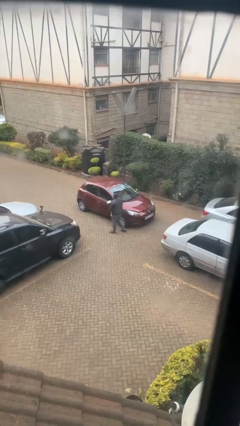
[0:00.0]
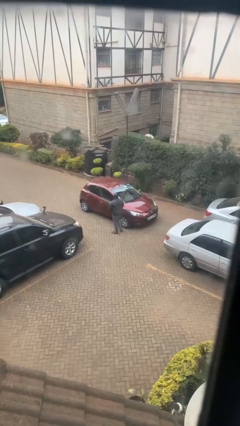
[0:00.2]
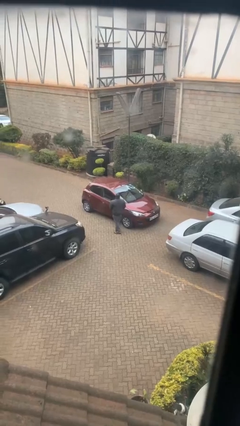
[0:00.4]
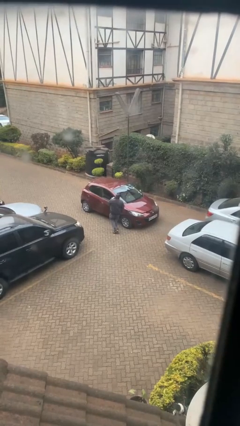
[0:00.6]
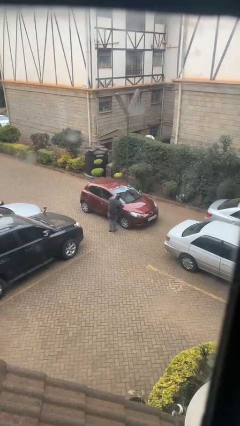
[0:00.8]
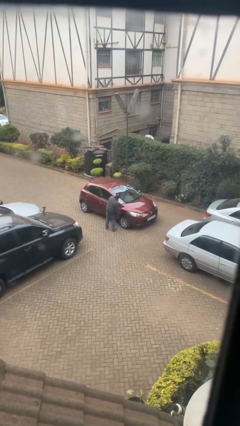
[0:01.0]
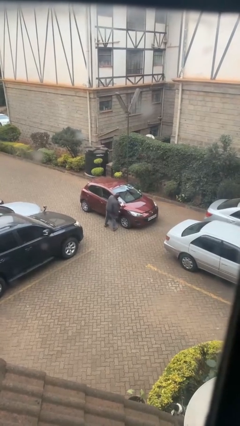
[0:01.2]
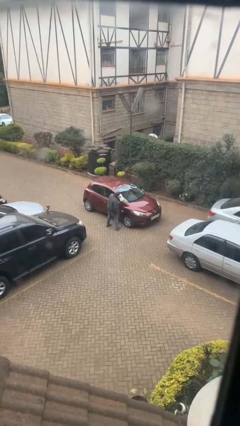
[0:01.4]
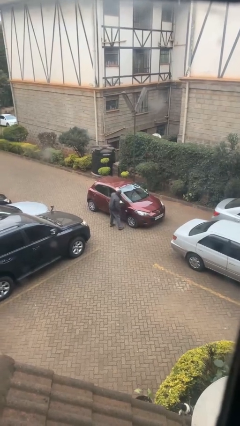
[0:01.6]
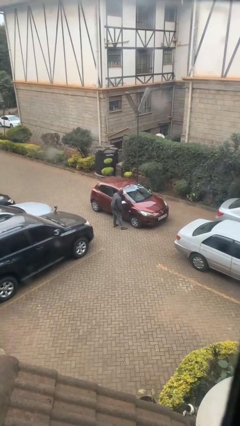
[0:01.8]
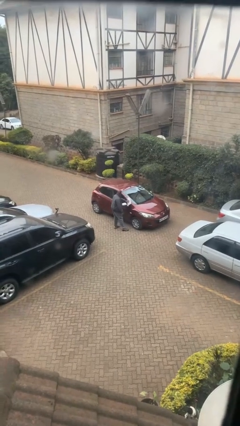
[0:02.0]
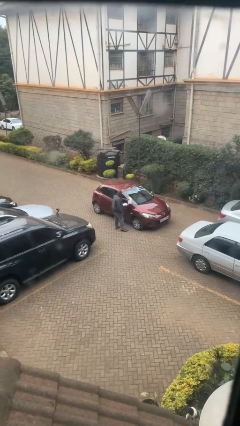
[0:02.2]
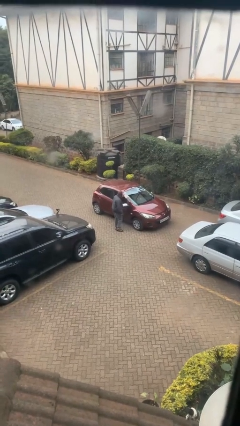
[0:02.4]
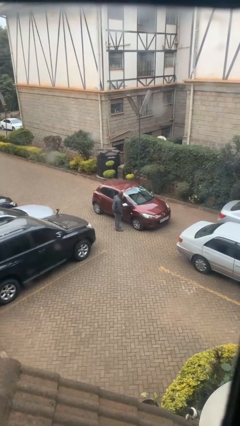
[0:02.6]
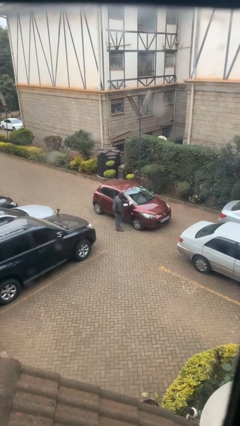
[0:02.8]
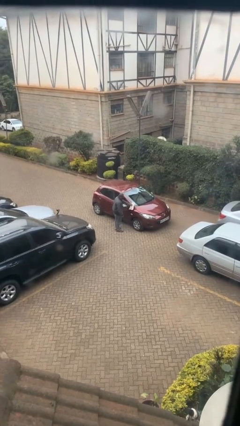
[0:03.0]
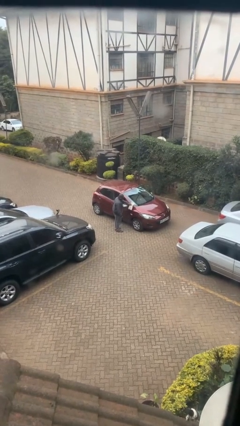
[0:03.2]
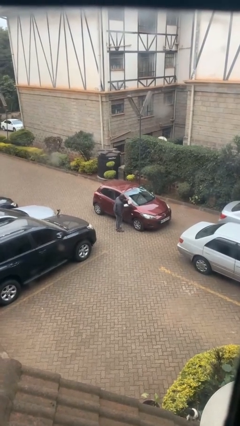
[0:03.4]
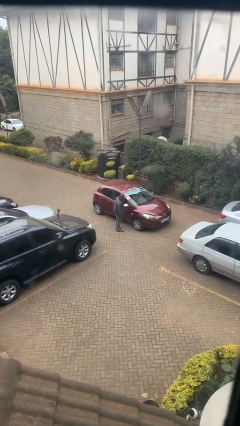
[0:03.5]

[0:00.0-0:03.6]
person polishes car with rag

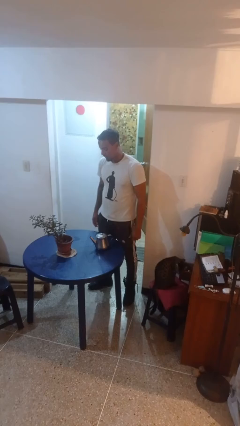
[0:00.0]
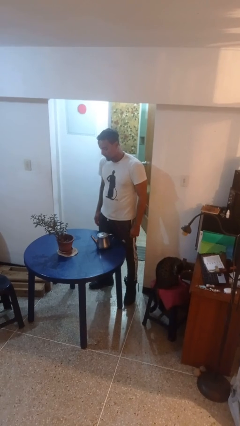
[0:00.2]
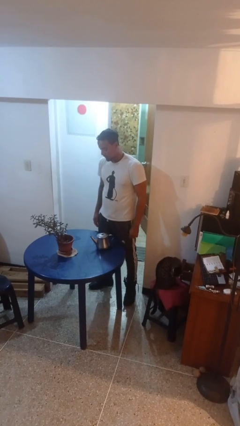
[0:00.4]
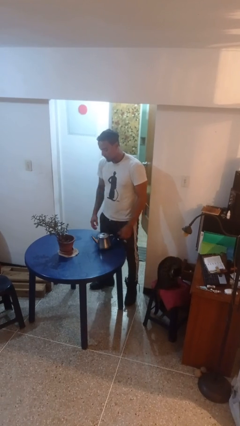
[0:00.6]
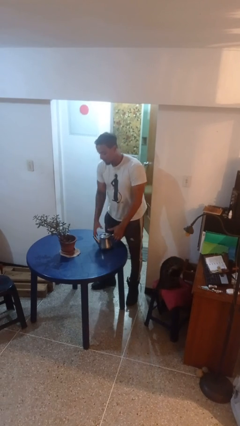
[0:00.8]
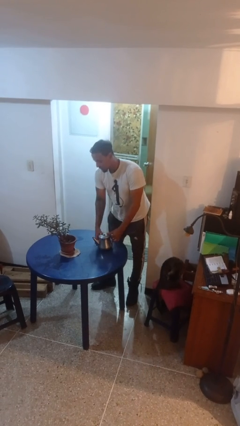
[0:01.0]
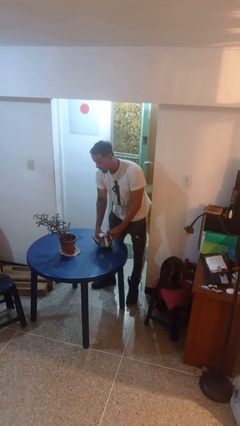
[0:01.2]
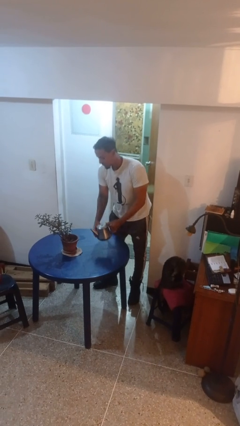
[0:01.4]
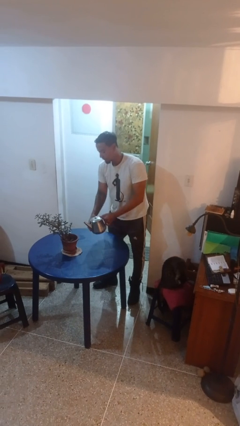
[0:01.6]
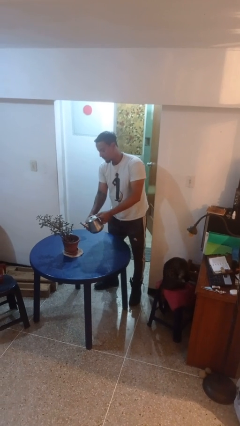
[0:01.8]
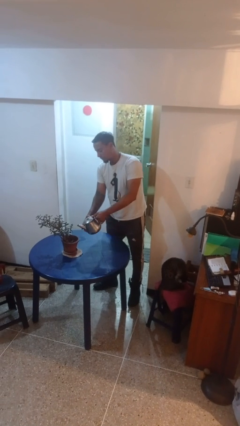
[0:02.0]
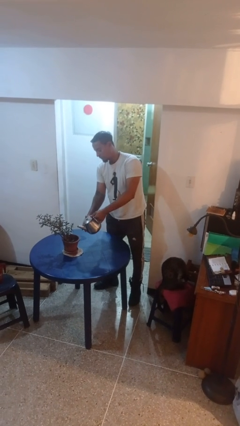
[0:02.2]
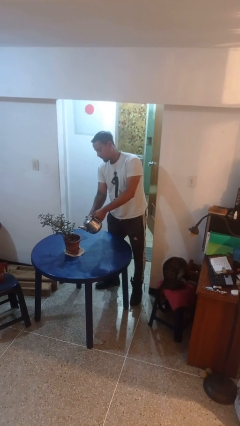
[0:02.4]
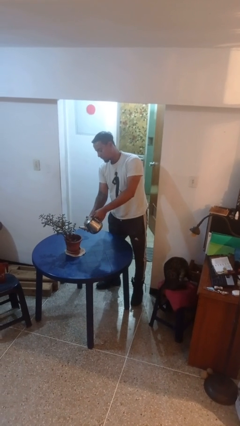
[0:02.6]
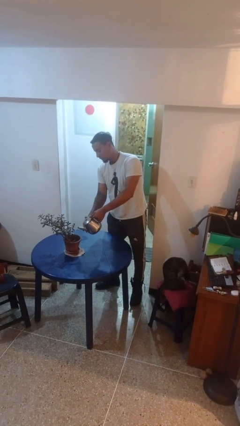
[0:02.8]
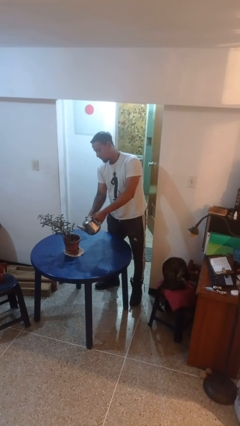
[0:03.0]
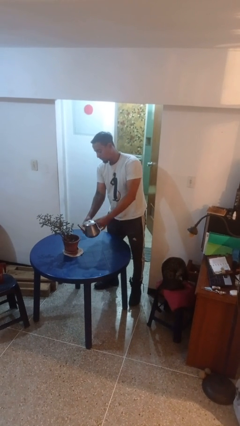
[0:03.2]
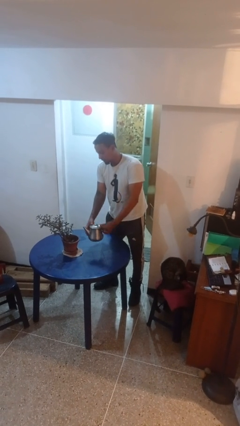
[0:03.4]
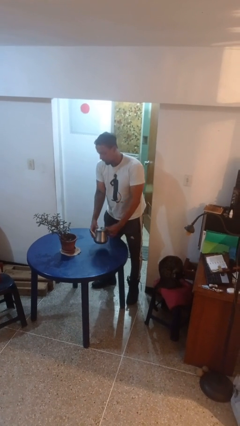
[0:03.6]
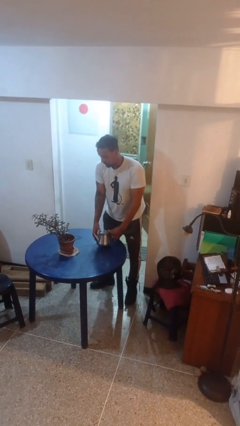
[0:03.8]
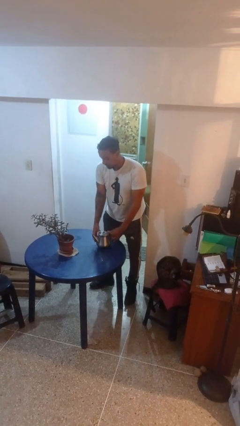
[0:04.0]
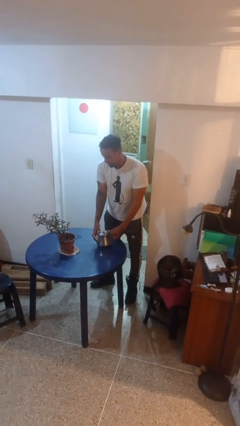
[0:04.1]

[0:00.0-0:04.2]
person waters houseplant

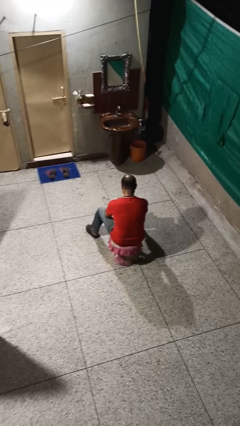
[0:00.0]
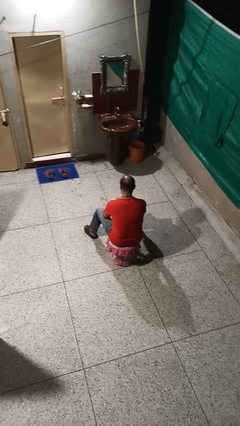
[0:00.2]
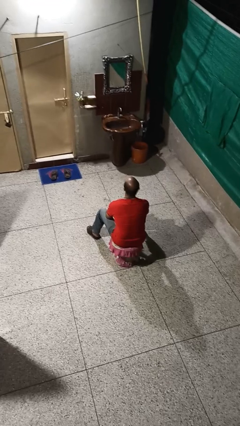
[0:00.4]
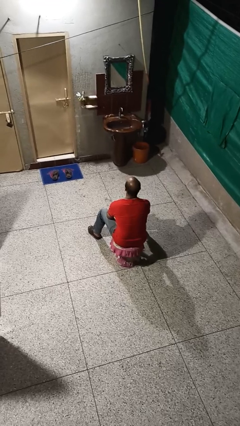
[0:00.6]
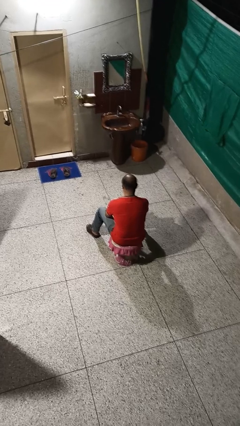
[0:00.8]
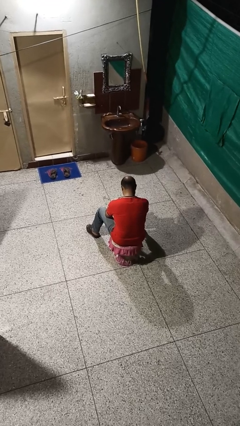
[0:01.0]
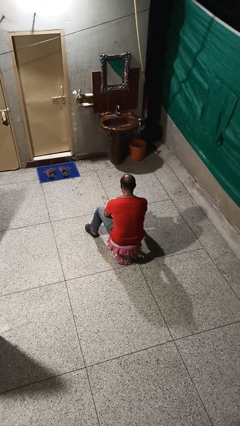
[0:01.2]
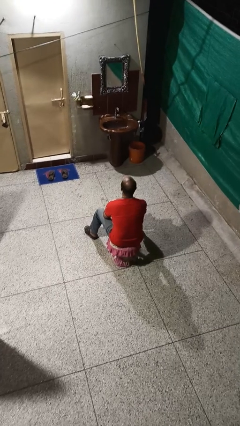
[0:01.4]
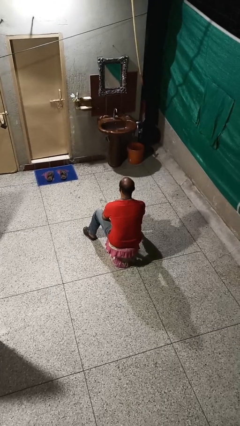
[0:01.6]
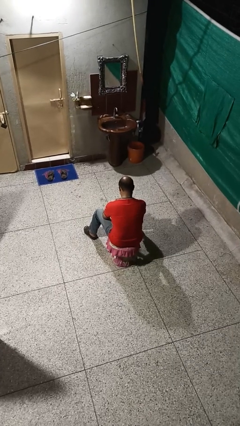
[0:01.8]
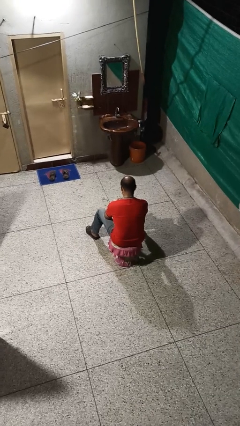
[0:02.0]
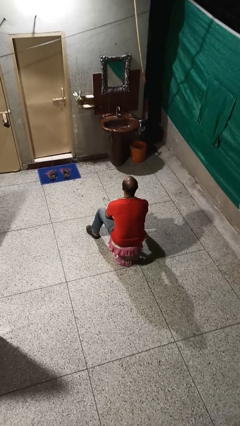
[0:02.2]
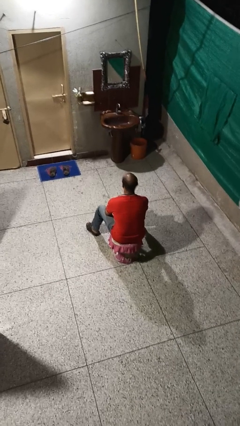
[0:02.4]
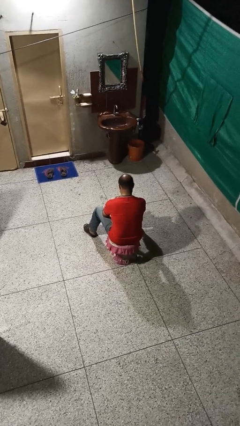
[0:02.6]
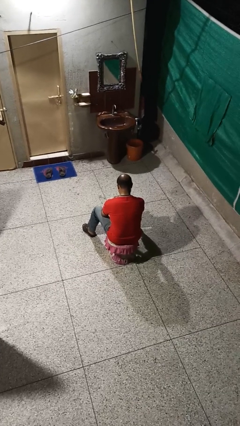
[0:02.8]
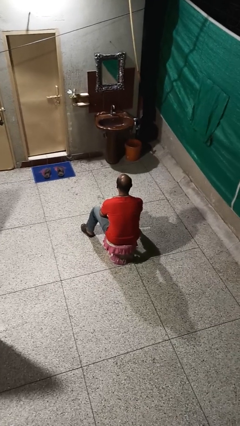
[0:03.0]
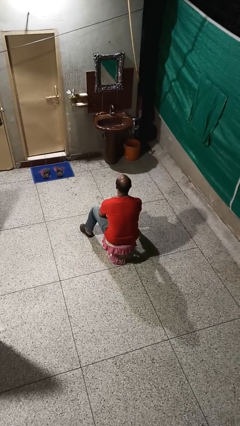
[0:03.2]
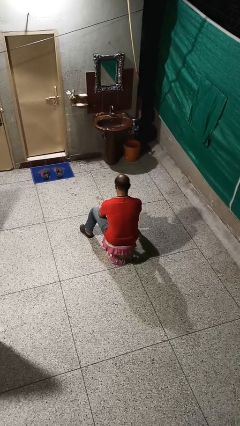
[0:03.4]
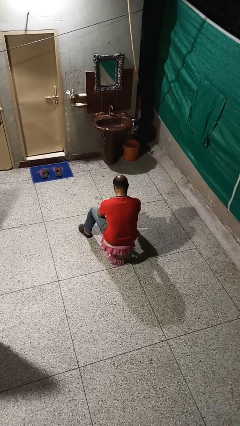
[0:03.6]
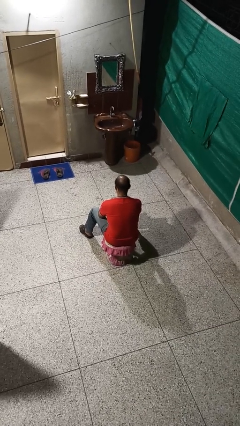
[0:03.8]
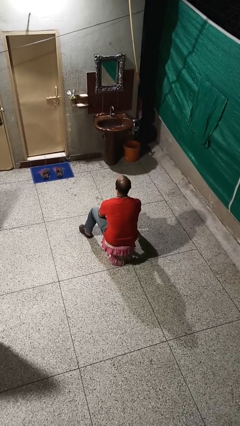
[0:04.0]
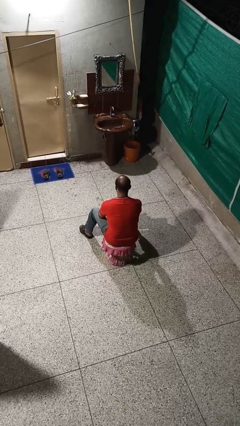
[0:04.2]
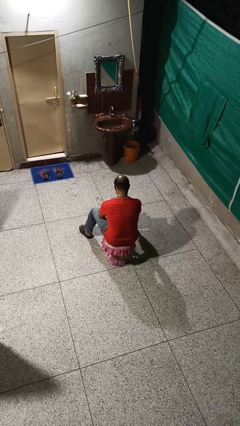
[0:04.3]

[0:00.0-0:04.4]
person nods head

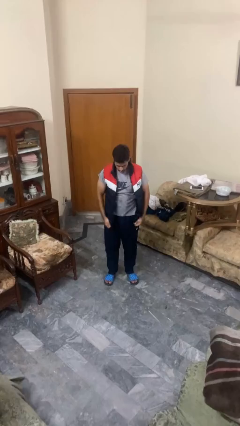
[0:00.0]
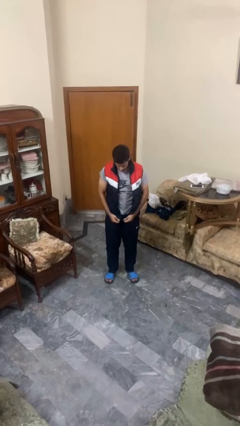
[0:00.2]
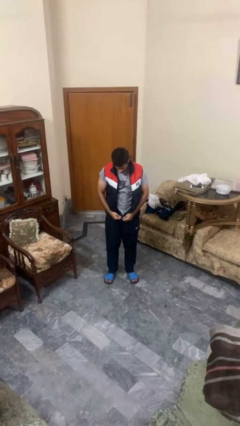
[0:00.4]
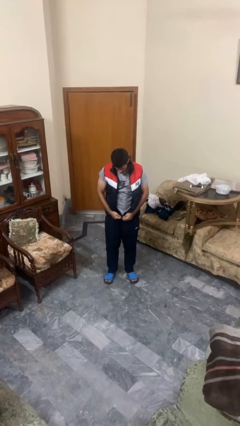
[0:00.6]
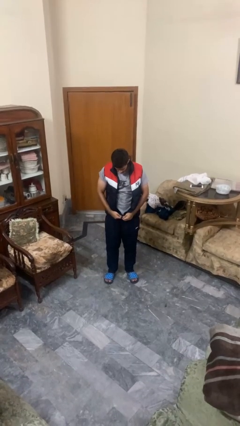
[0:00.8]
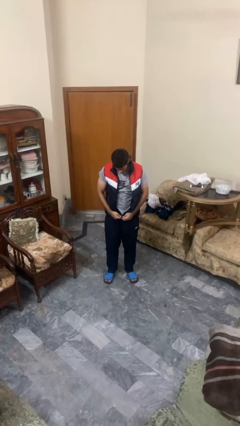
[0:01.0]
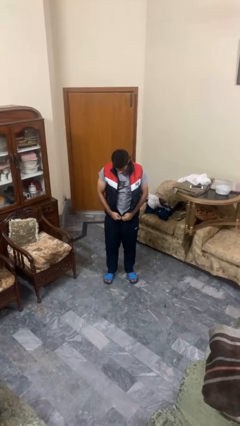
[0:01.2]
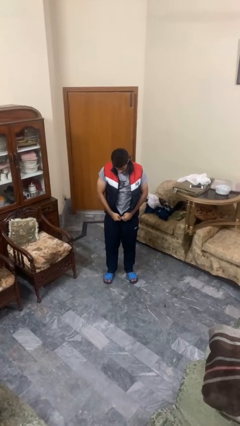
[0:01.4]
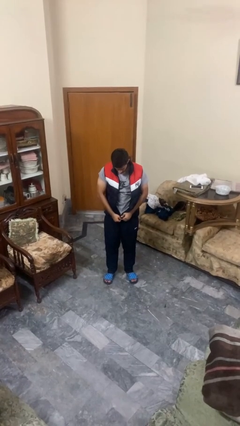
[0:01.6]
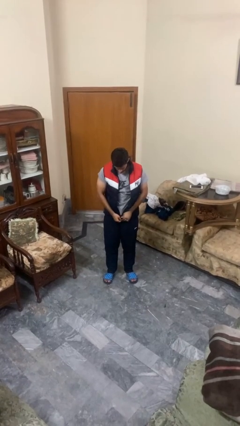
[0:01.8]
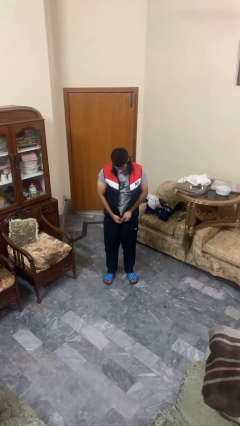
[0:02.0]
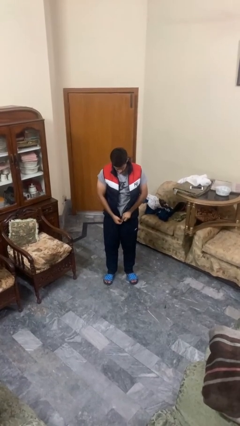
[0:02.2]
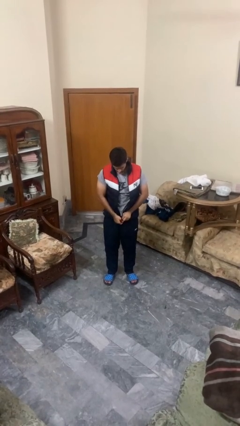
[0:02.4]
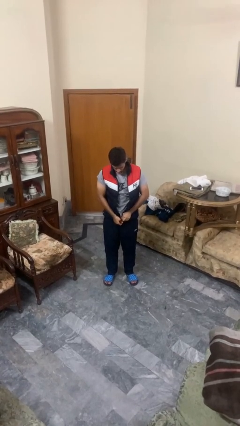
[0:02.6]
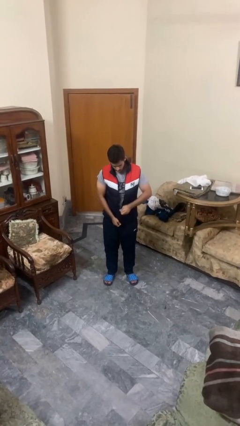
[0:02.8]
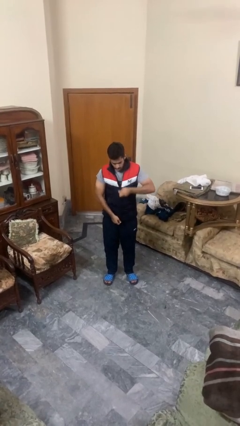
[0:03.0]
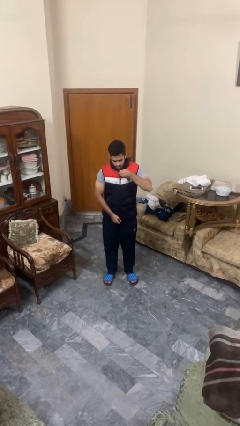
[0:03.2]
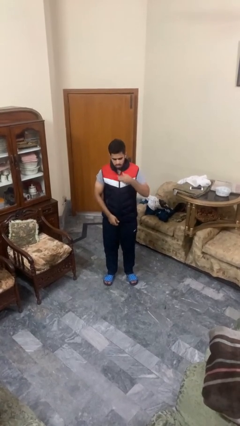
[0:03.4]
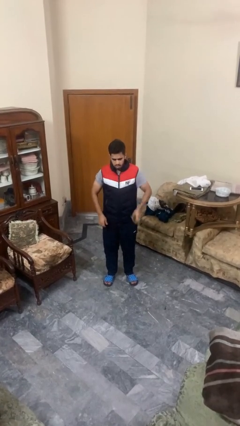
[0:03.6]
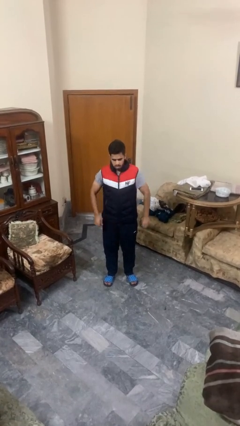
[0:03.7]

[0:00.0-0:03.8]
person zips up jacket

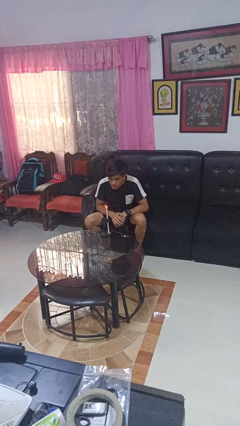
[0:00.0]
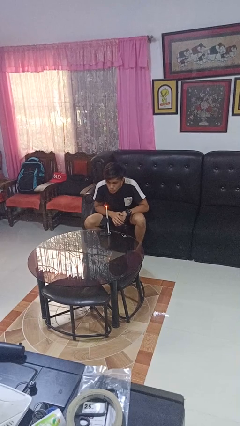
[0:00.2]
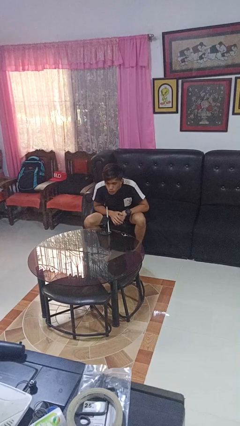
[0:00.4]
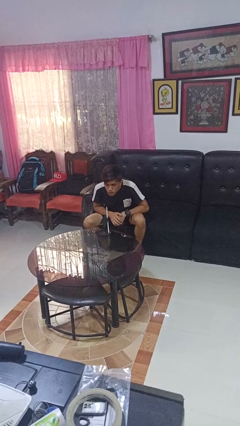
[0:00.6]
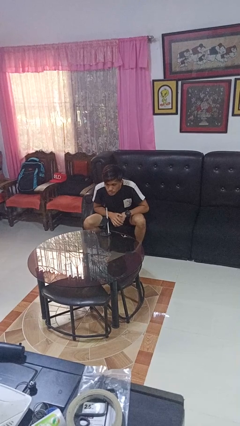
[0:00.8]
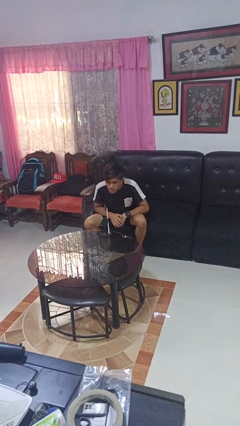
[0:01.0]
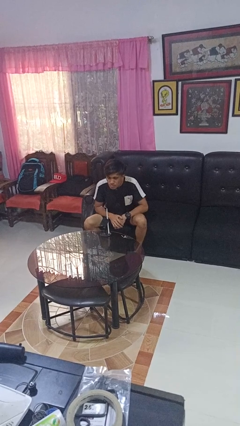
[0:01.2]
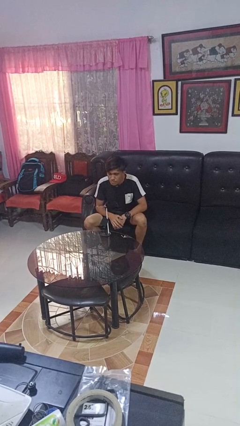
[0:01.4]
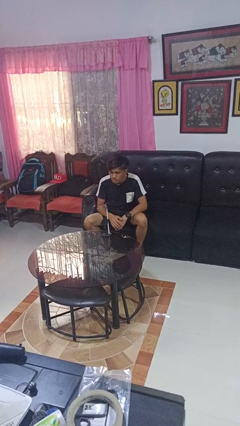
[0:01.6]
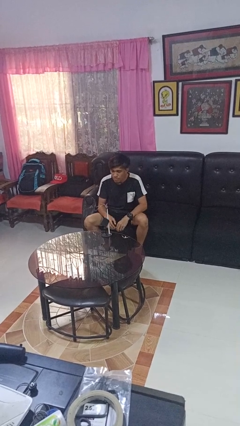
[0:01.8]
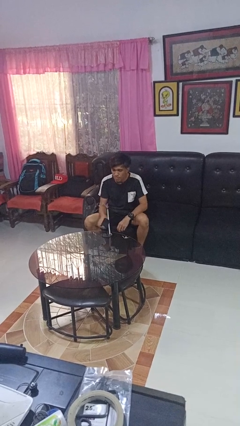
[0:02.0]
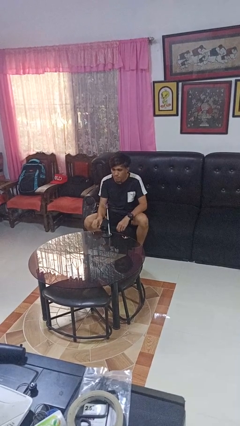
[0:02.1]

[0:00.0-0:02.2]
person extinguishes candle
